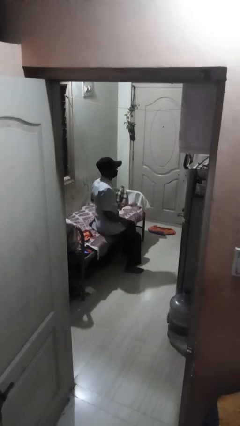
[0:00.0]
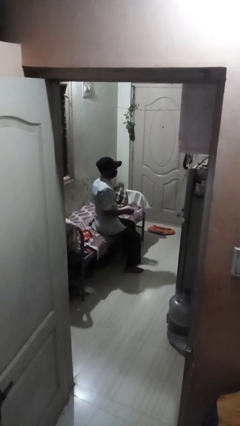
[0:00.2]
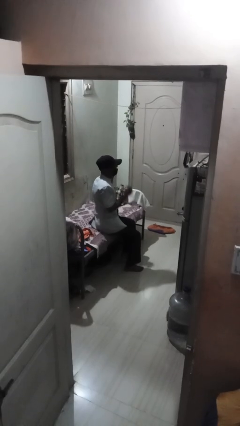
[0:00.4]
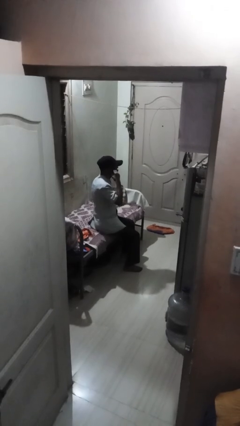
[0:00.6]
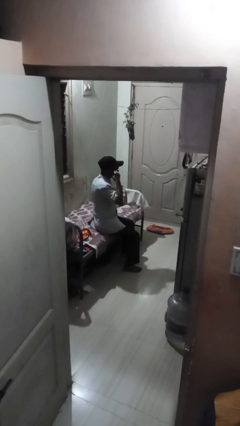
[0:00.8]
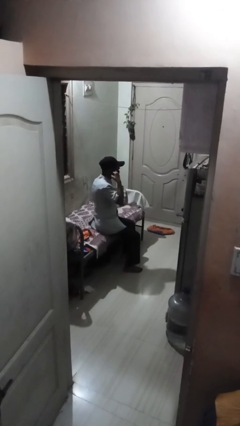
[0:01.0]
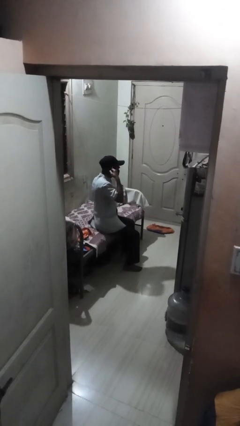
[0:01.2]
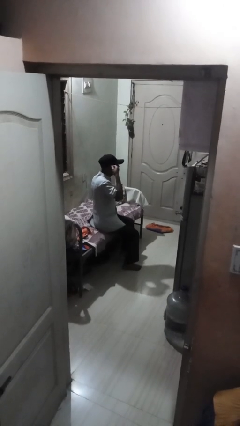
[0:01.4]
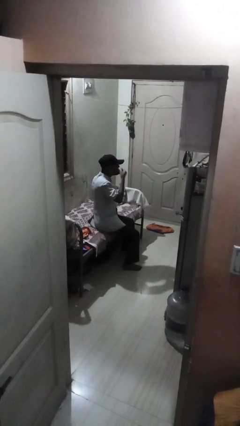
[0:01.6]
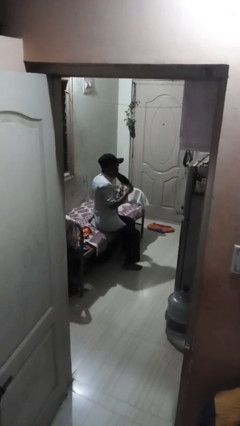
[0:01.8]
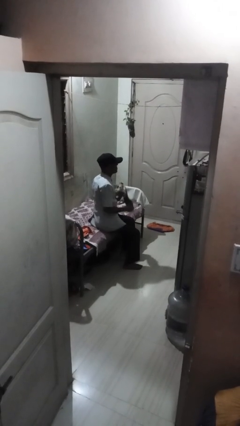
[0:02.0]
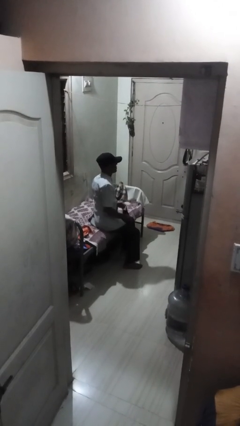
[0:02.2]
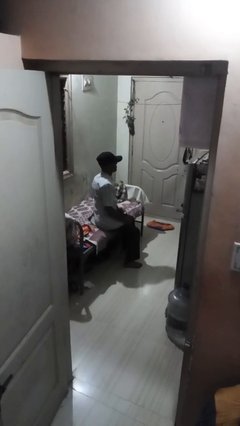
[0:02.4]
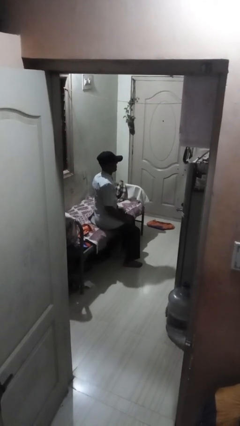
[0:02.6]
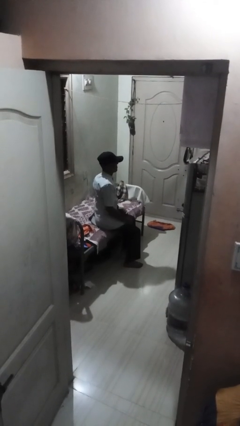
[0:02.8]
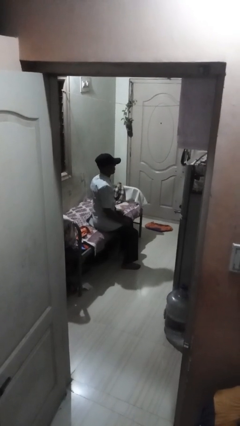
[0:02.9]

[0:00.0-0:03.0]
person takes off facemask

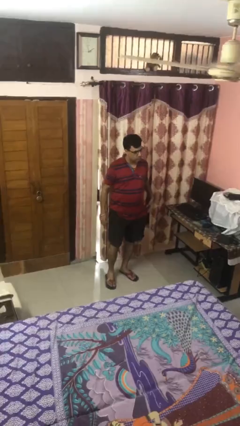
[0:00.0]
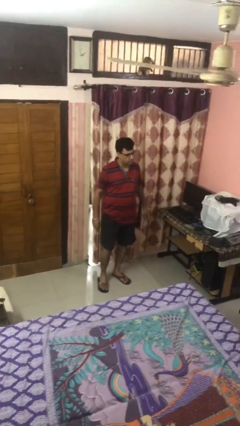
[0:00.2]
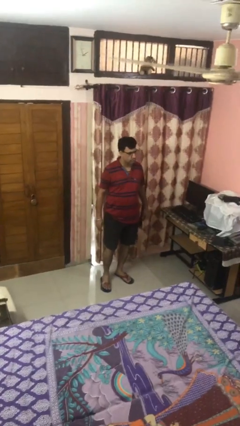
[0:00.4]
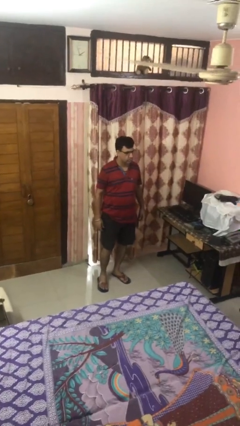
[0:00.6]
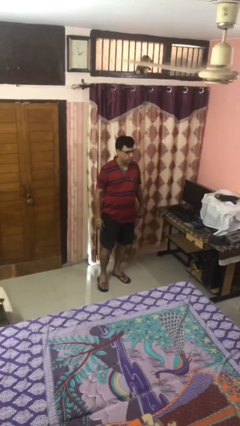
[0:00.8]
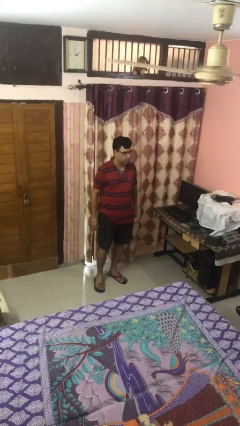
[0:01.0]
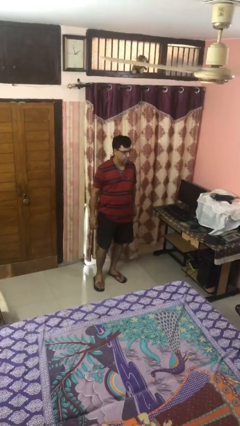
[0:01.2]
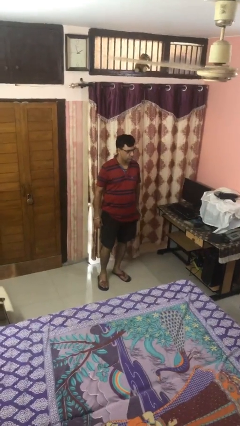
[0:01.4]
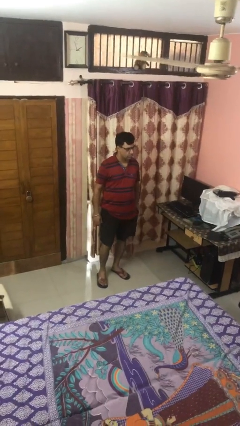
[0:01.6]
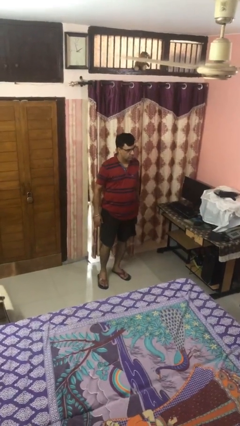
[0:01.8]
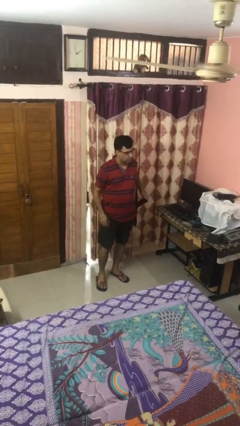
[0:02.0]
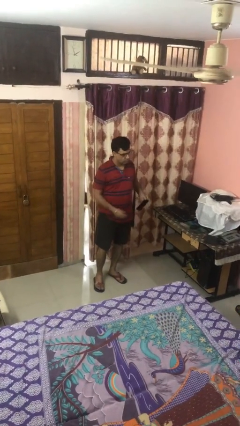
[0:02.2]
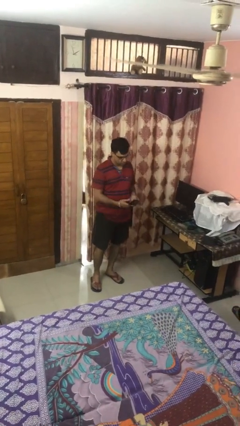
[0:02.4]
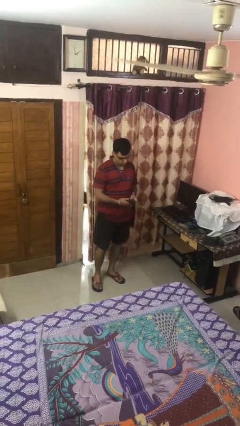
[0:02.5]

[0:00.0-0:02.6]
person takes phone from pocket

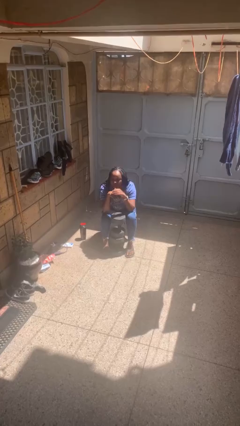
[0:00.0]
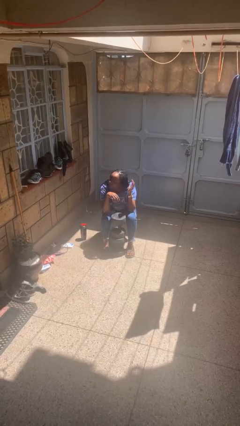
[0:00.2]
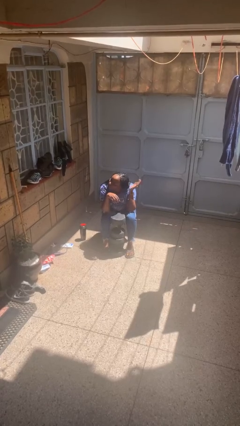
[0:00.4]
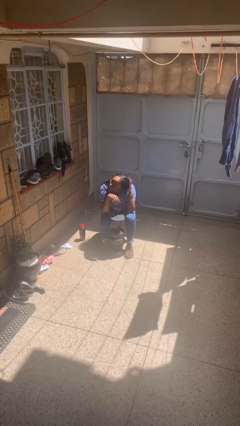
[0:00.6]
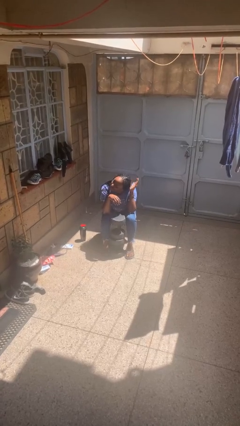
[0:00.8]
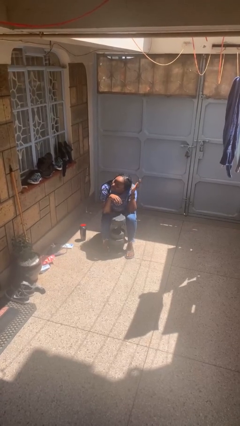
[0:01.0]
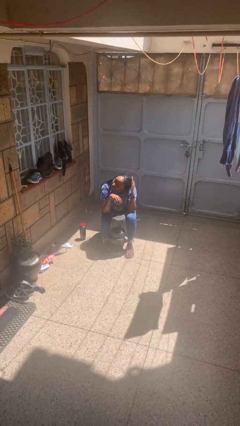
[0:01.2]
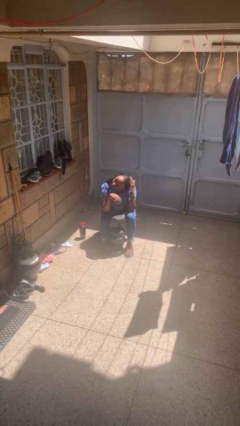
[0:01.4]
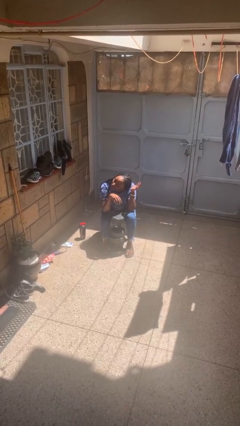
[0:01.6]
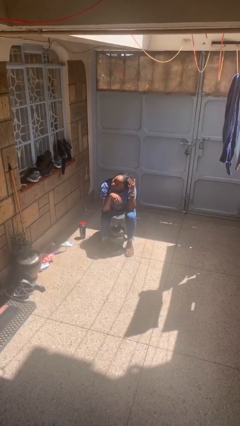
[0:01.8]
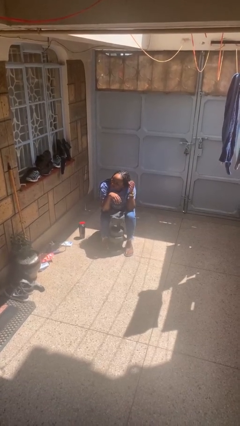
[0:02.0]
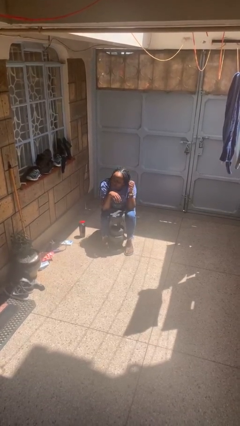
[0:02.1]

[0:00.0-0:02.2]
person pats head

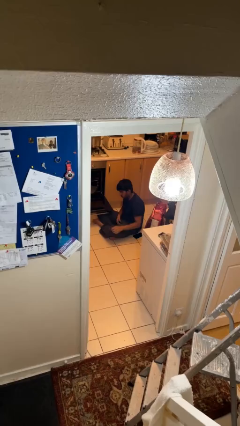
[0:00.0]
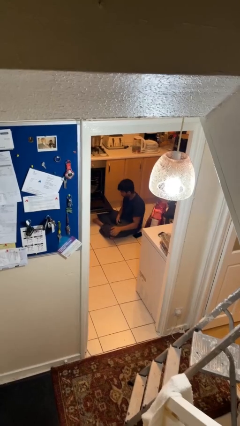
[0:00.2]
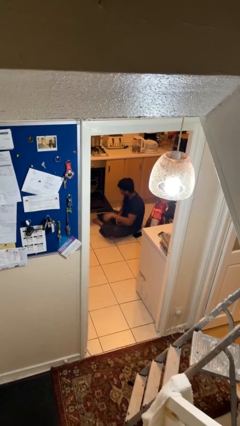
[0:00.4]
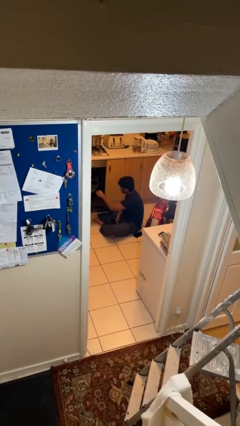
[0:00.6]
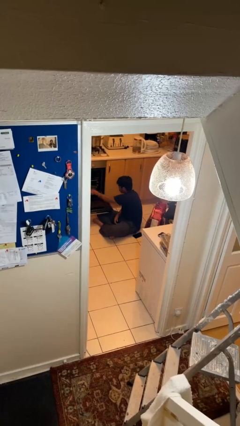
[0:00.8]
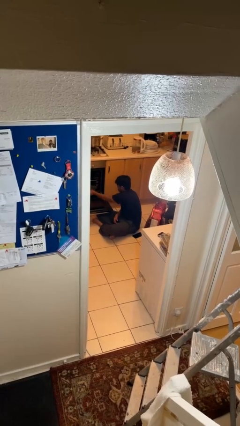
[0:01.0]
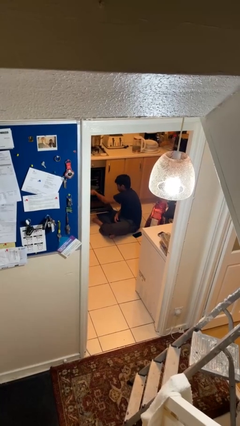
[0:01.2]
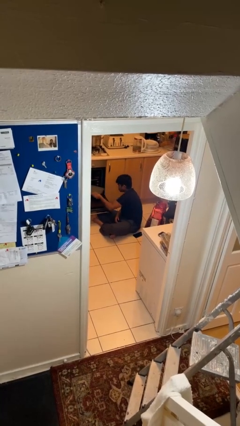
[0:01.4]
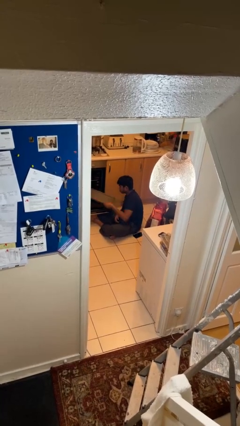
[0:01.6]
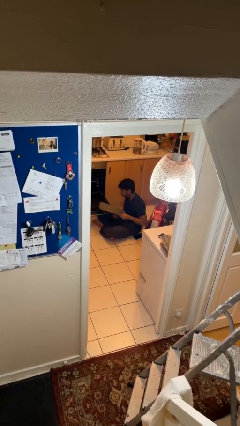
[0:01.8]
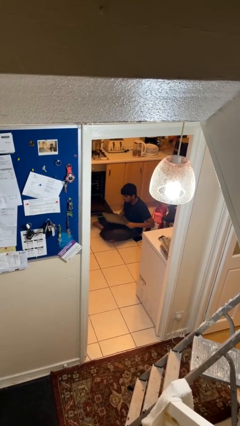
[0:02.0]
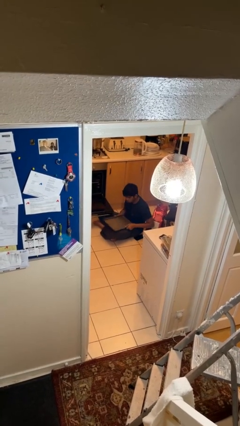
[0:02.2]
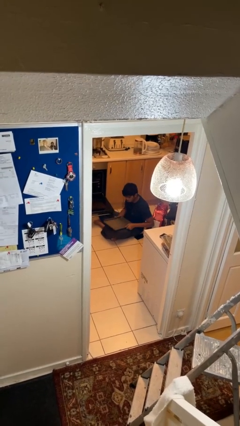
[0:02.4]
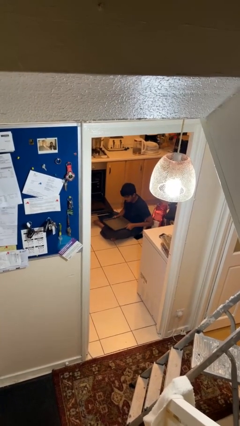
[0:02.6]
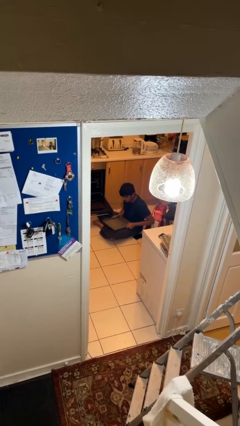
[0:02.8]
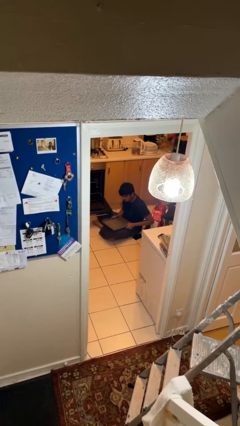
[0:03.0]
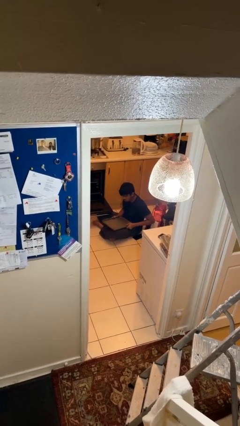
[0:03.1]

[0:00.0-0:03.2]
person takes object from oven

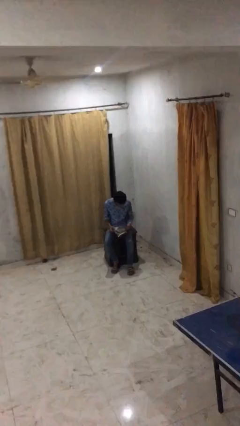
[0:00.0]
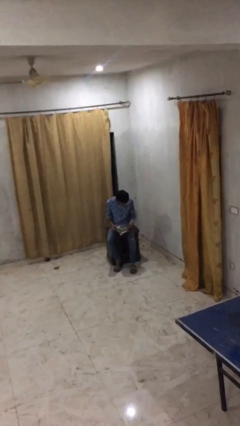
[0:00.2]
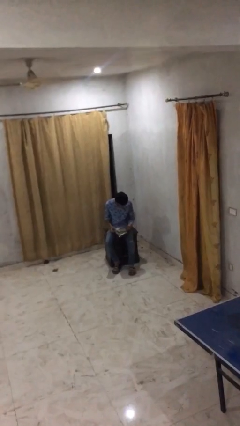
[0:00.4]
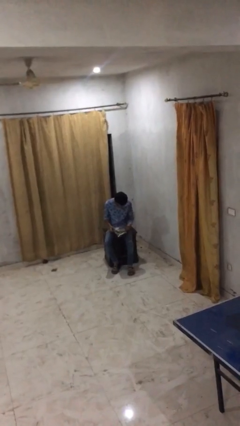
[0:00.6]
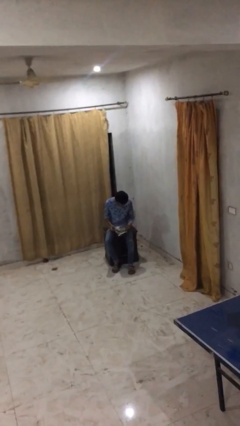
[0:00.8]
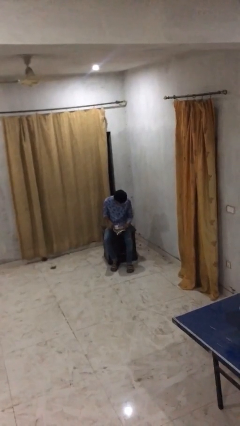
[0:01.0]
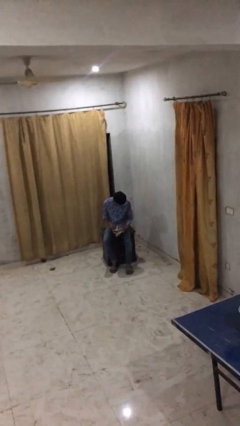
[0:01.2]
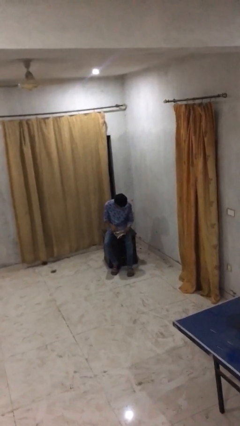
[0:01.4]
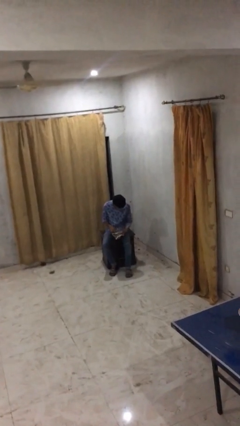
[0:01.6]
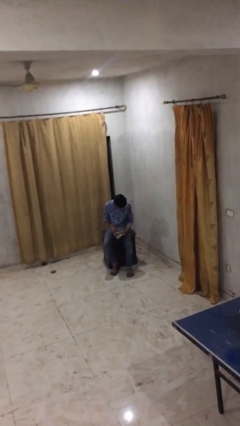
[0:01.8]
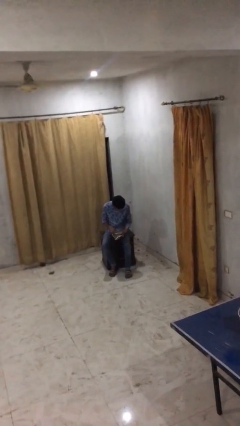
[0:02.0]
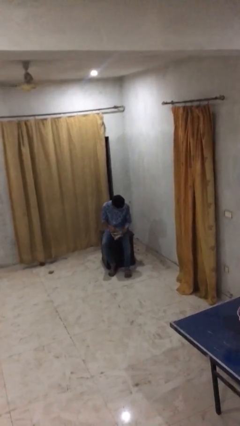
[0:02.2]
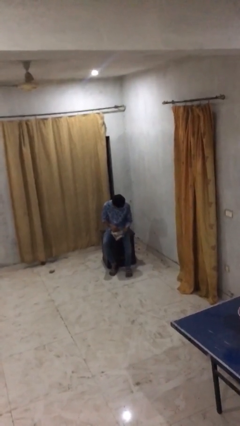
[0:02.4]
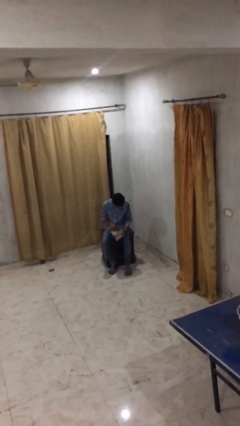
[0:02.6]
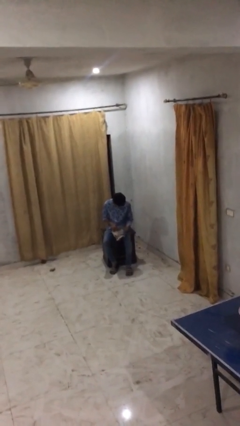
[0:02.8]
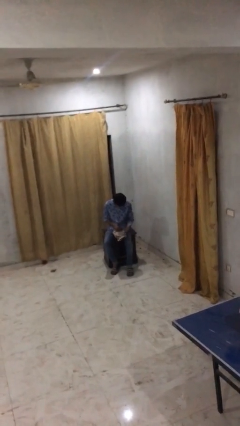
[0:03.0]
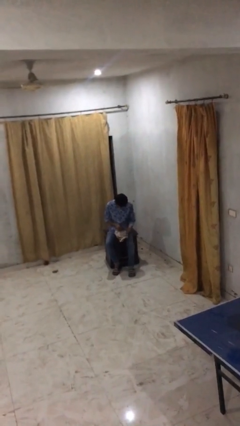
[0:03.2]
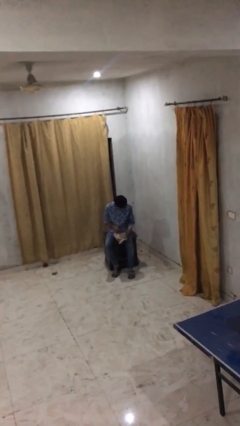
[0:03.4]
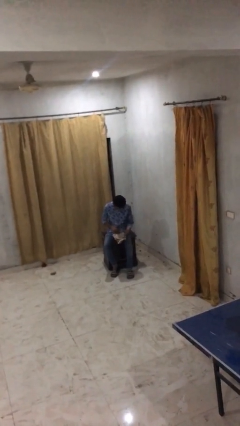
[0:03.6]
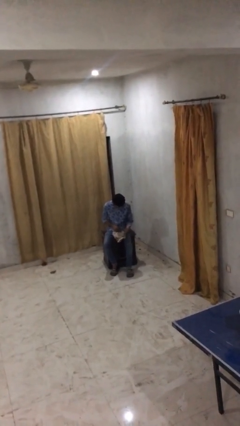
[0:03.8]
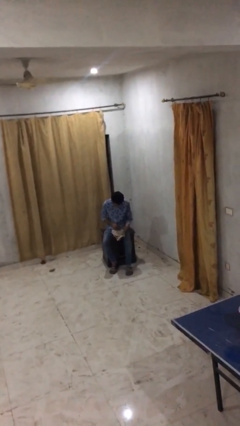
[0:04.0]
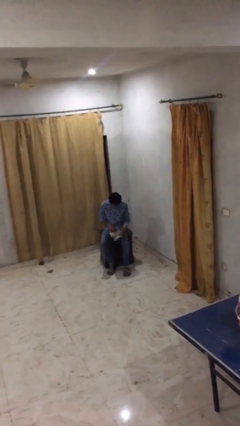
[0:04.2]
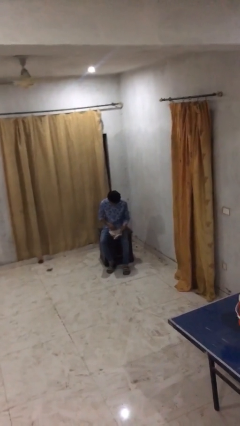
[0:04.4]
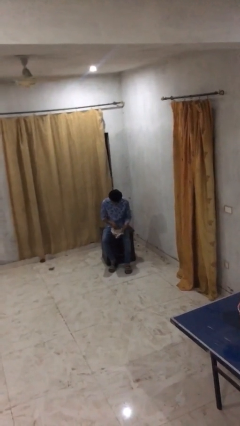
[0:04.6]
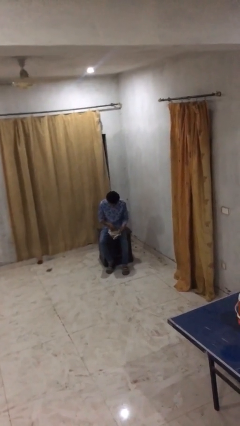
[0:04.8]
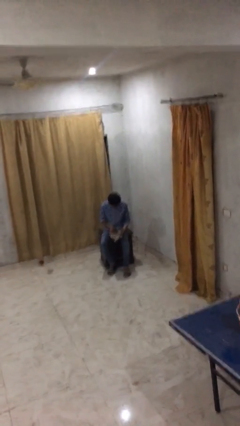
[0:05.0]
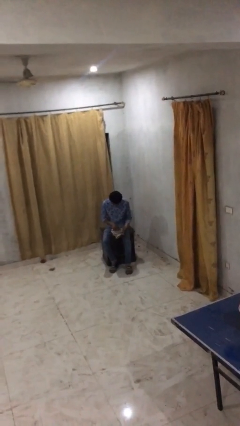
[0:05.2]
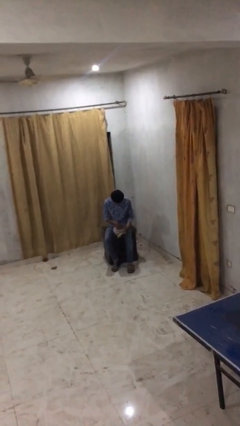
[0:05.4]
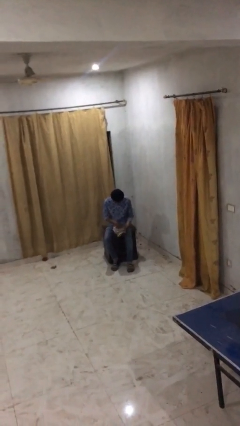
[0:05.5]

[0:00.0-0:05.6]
person reads document

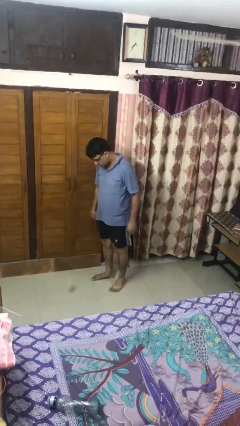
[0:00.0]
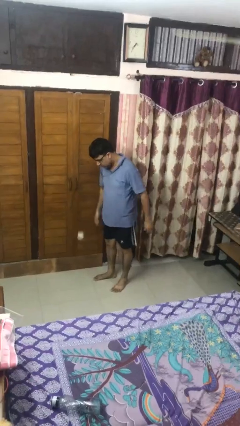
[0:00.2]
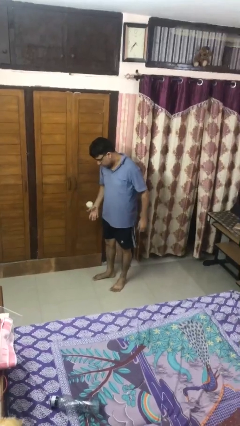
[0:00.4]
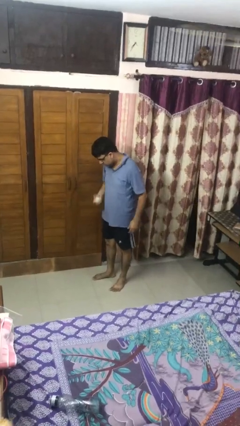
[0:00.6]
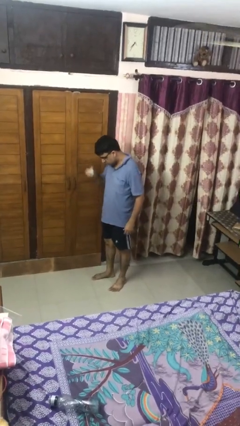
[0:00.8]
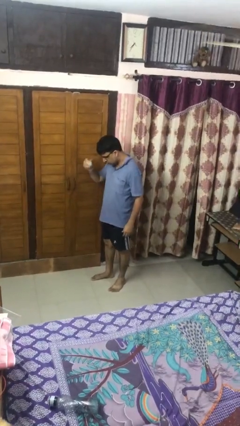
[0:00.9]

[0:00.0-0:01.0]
person bounces ball on floor
